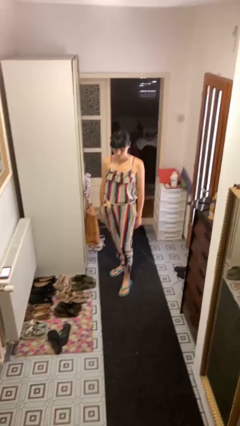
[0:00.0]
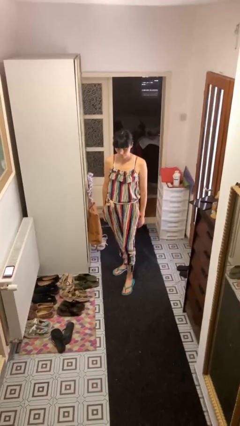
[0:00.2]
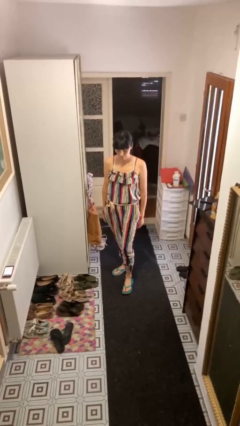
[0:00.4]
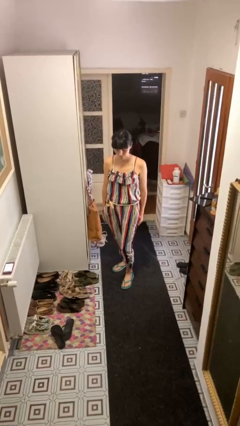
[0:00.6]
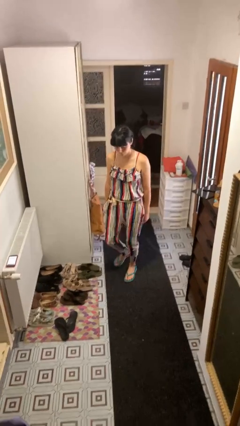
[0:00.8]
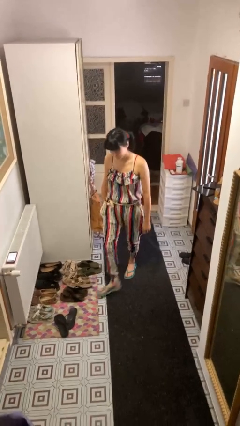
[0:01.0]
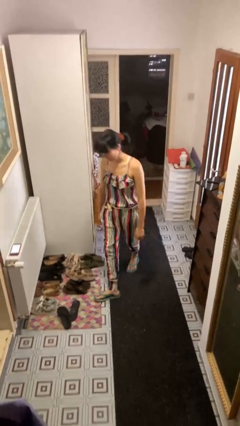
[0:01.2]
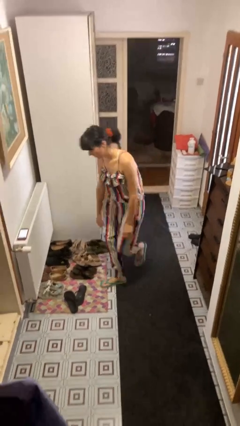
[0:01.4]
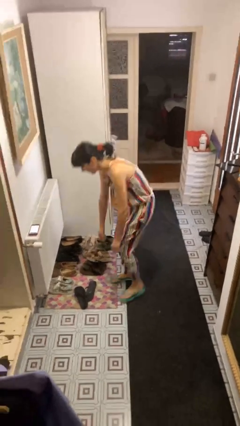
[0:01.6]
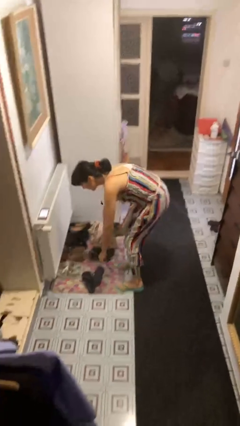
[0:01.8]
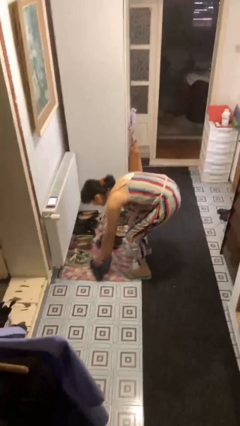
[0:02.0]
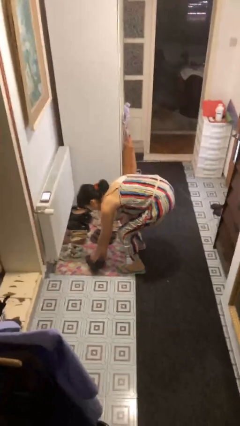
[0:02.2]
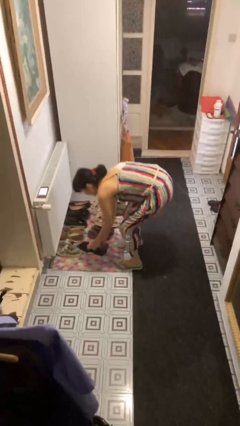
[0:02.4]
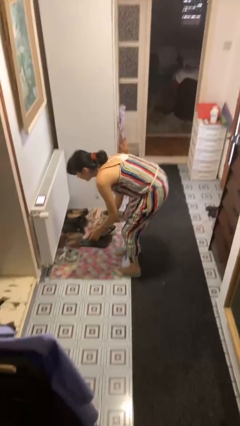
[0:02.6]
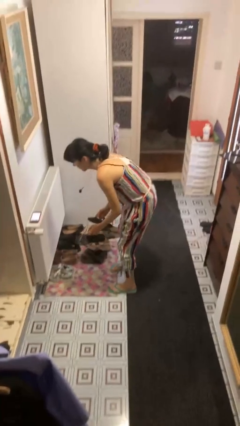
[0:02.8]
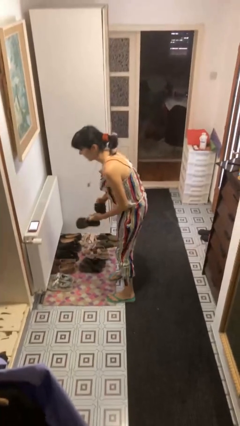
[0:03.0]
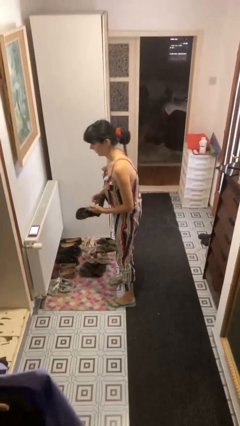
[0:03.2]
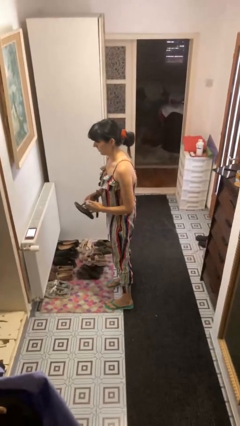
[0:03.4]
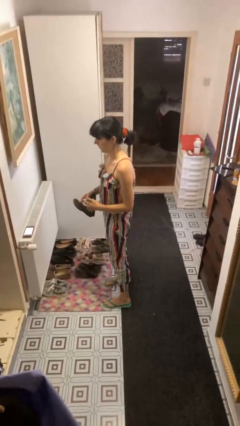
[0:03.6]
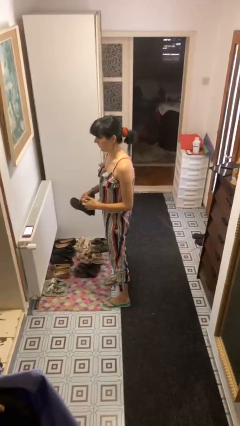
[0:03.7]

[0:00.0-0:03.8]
person picks up object from floor

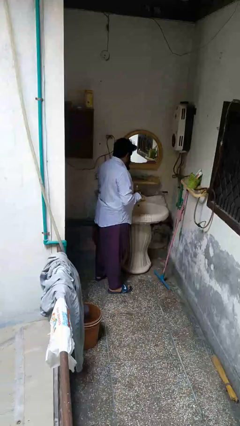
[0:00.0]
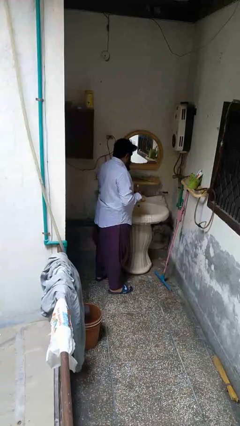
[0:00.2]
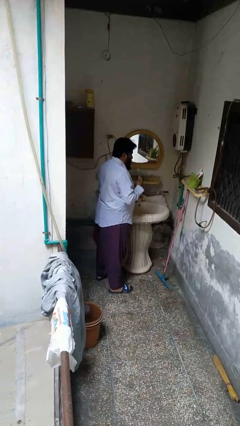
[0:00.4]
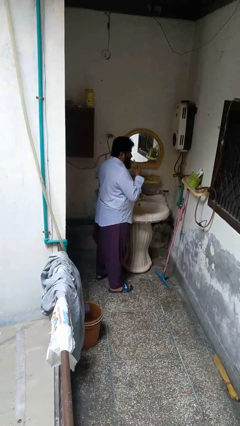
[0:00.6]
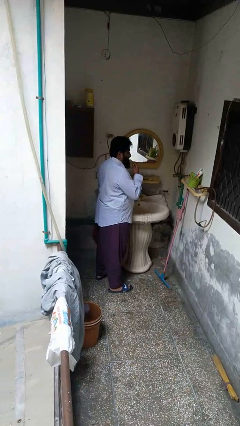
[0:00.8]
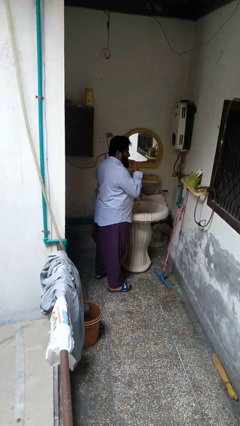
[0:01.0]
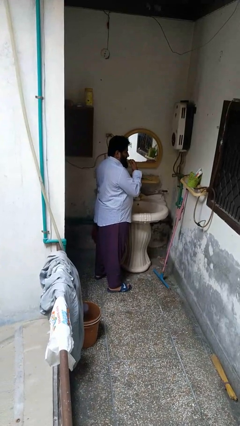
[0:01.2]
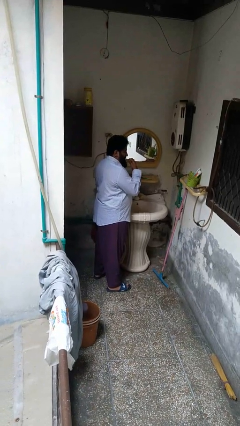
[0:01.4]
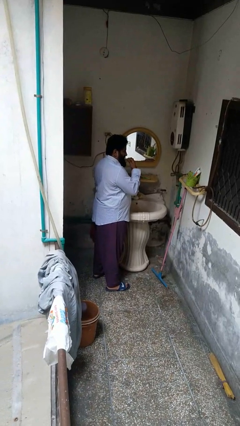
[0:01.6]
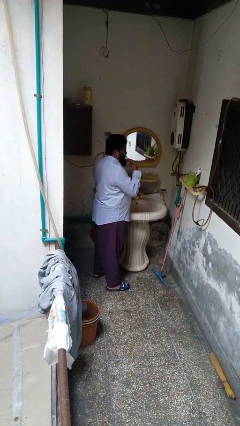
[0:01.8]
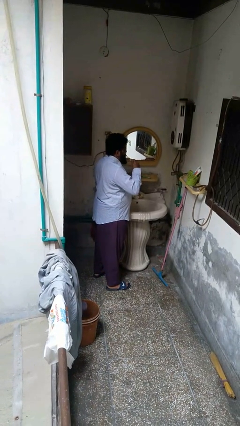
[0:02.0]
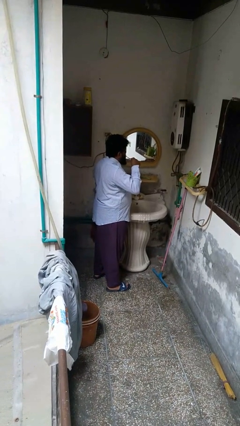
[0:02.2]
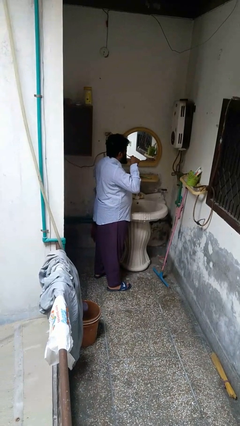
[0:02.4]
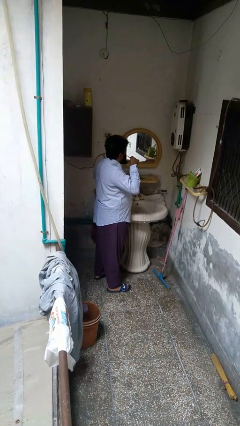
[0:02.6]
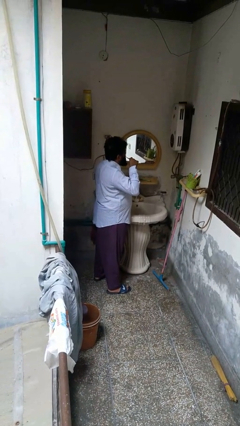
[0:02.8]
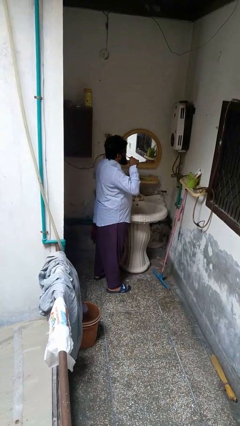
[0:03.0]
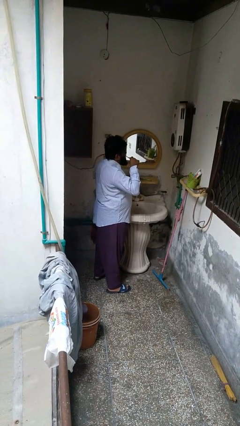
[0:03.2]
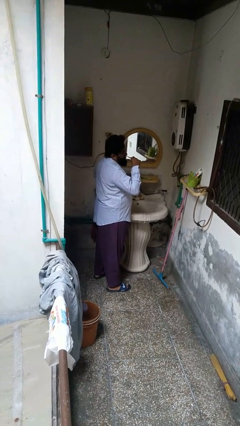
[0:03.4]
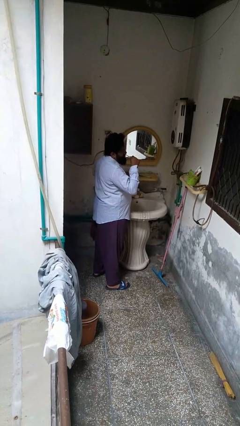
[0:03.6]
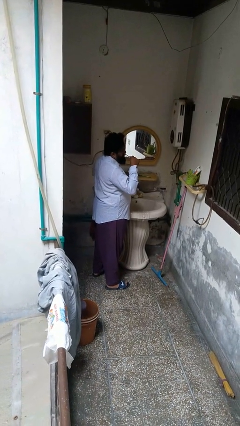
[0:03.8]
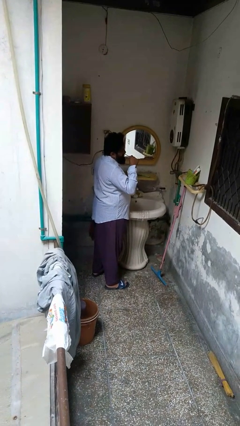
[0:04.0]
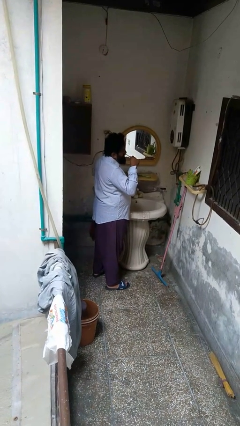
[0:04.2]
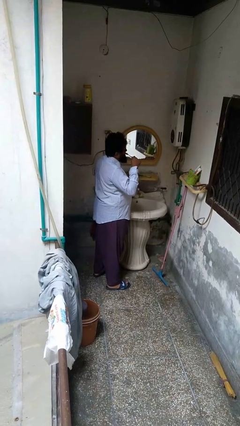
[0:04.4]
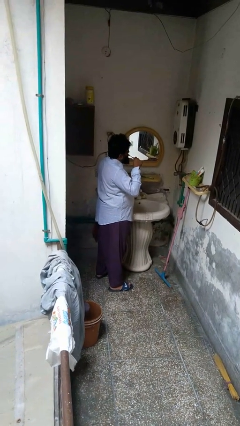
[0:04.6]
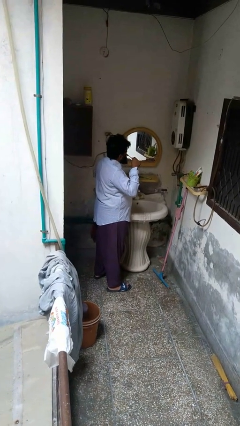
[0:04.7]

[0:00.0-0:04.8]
person brushes teeth

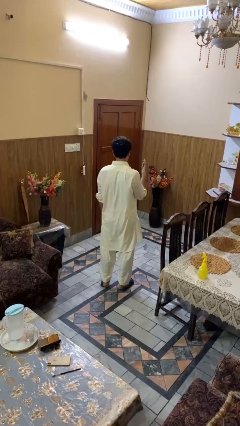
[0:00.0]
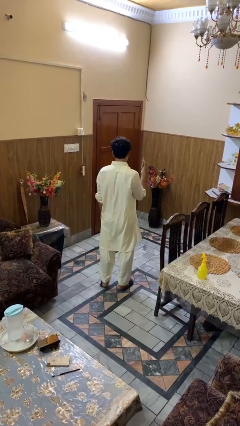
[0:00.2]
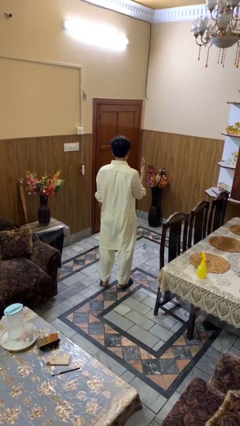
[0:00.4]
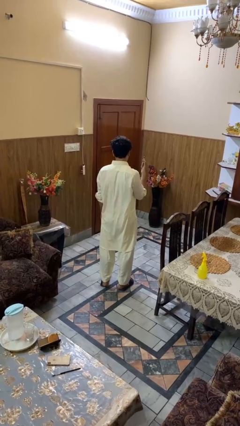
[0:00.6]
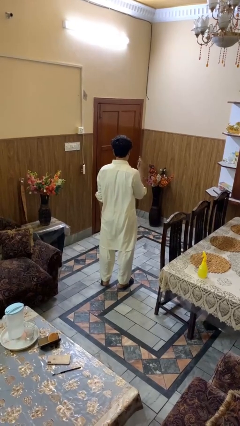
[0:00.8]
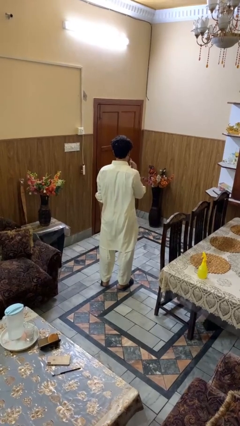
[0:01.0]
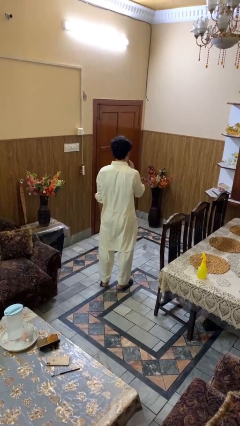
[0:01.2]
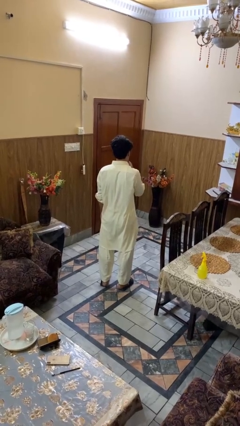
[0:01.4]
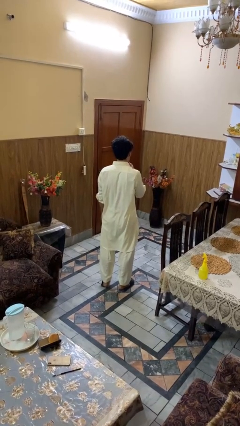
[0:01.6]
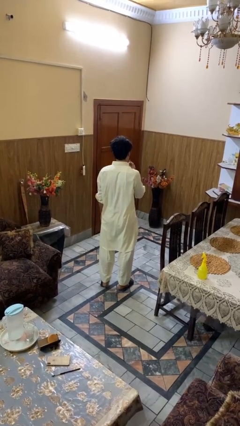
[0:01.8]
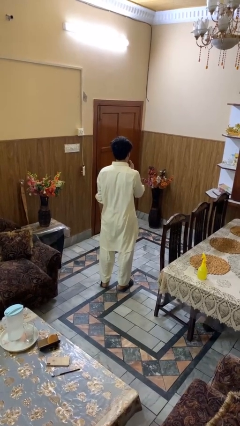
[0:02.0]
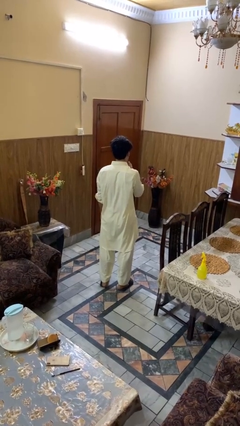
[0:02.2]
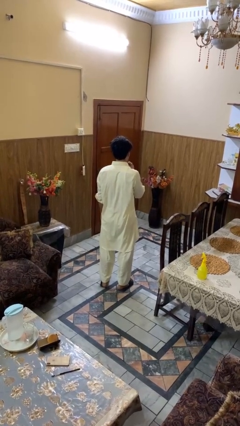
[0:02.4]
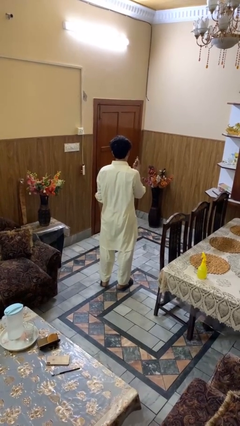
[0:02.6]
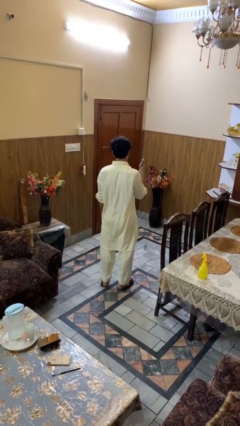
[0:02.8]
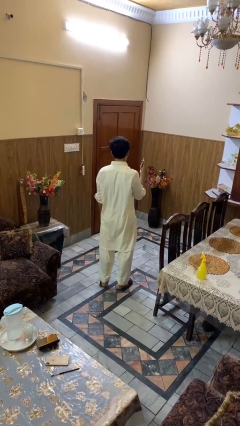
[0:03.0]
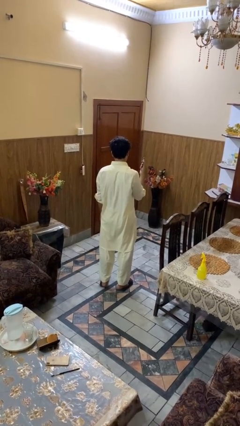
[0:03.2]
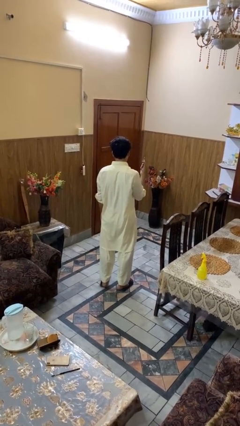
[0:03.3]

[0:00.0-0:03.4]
person applies lip makeup

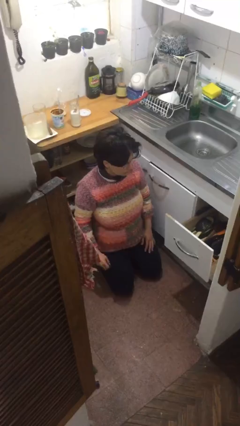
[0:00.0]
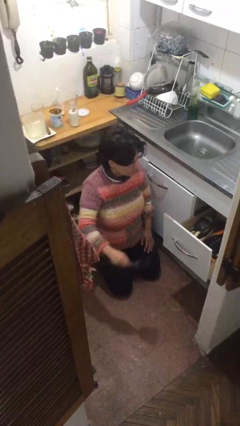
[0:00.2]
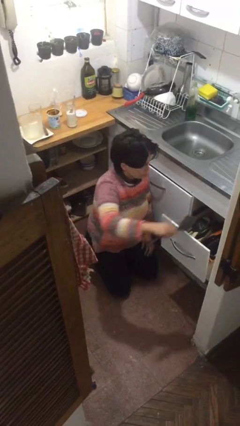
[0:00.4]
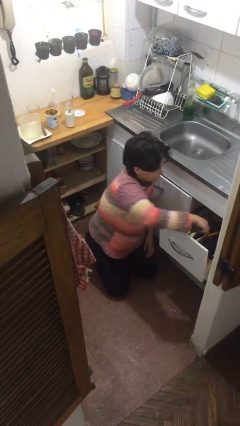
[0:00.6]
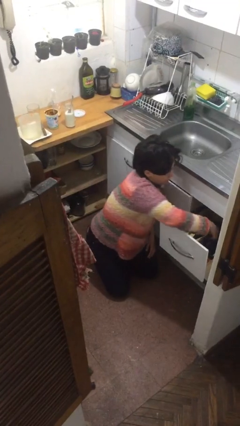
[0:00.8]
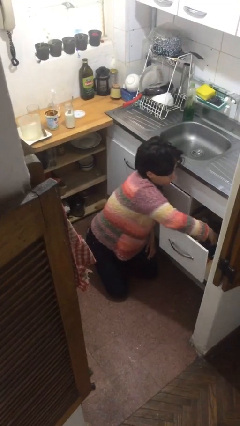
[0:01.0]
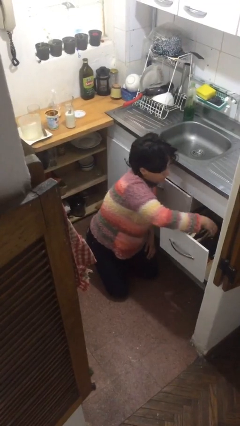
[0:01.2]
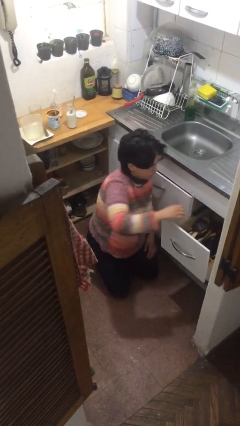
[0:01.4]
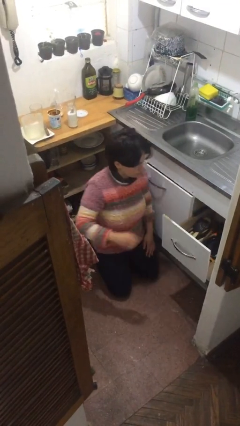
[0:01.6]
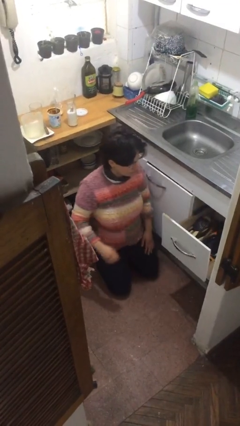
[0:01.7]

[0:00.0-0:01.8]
person puts object into kitchen drawer

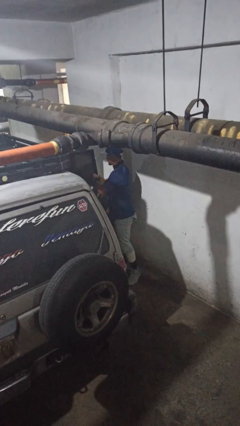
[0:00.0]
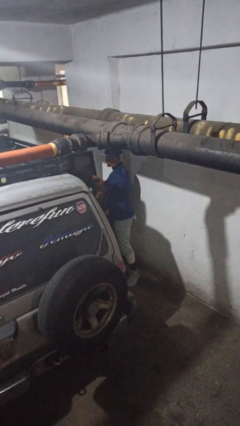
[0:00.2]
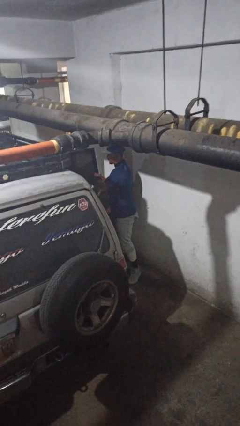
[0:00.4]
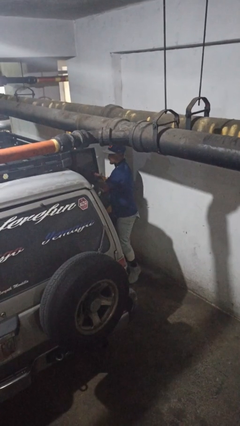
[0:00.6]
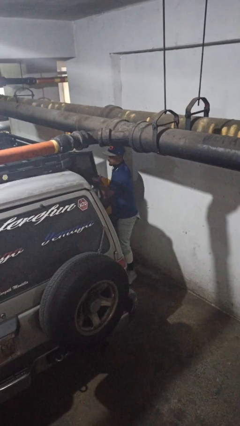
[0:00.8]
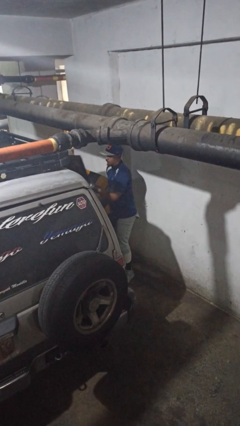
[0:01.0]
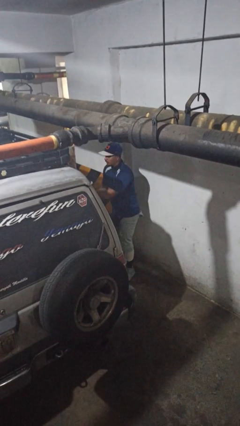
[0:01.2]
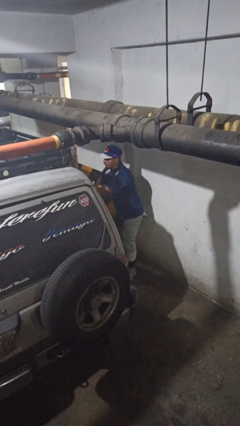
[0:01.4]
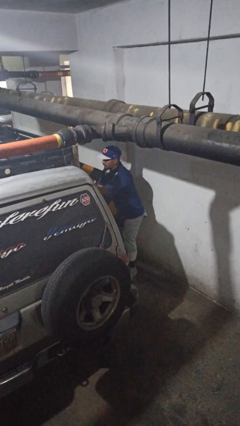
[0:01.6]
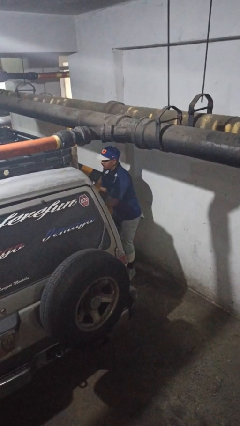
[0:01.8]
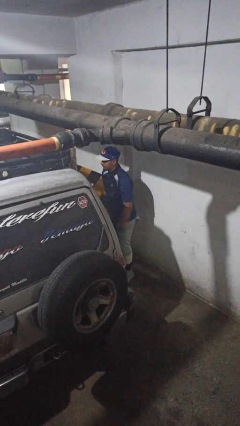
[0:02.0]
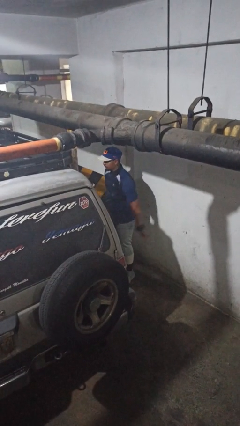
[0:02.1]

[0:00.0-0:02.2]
person closes car door

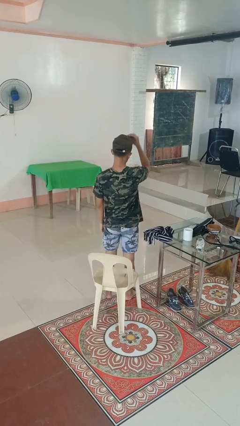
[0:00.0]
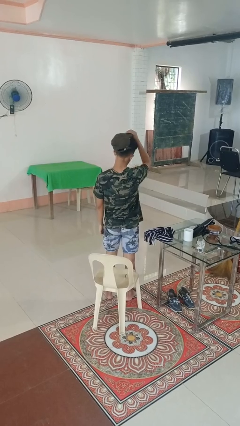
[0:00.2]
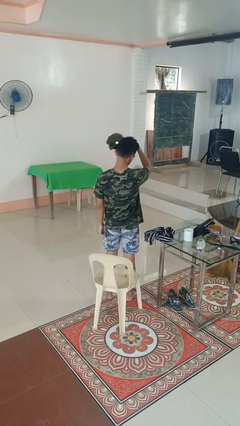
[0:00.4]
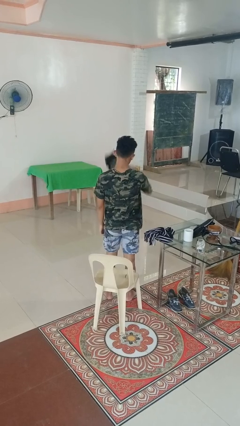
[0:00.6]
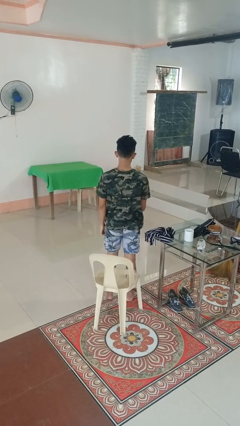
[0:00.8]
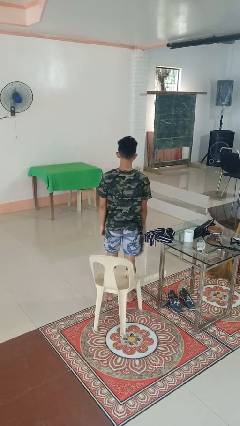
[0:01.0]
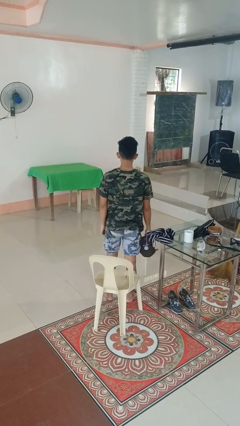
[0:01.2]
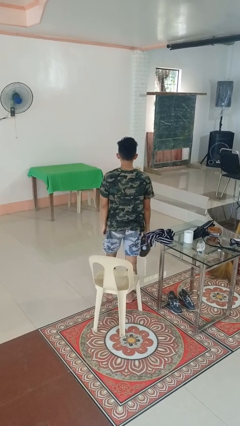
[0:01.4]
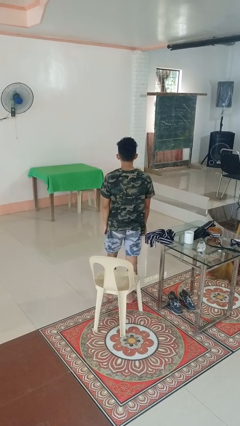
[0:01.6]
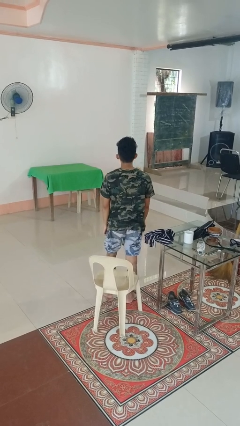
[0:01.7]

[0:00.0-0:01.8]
person takes off hat
